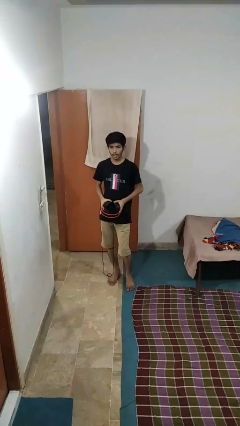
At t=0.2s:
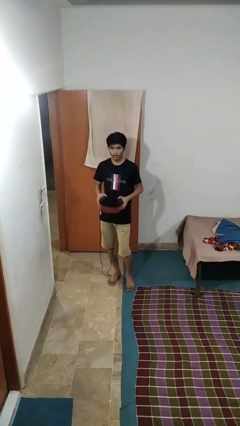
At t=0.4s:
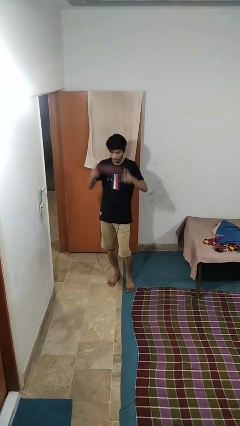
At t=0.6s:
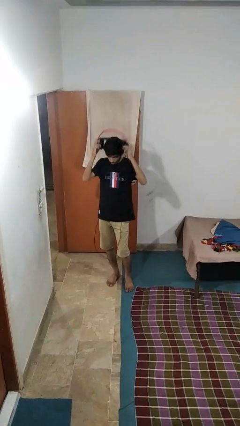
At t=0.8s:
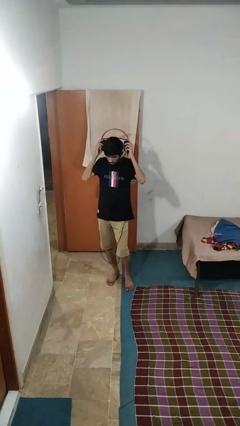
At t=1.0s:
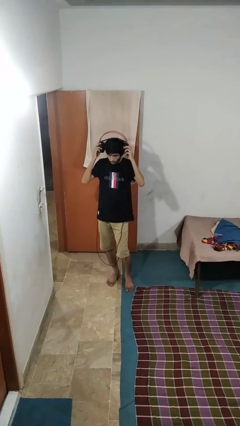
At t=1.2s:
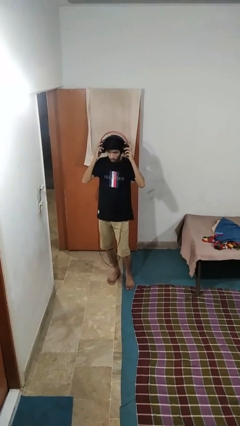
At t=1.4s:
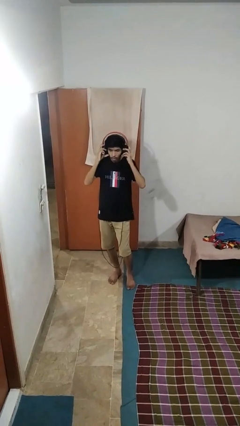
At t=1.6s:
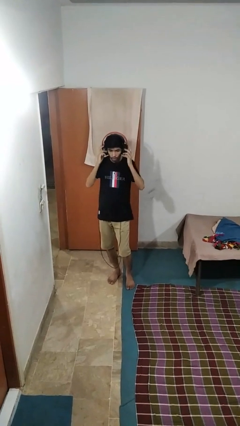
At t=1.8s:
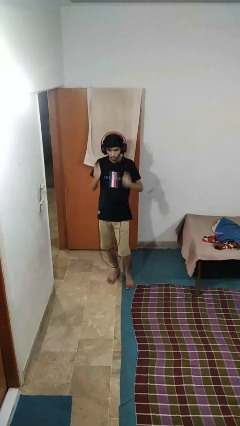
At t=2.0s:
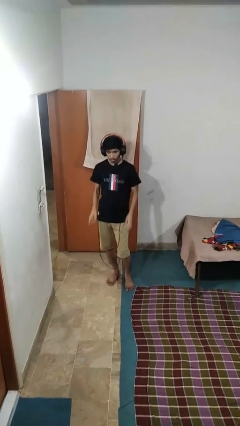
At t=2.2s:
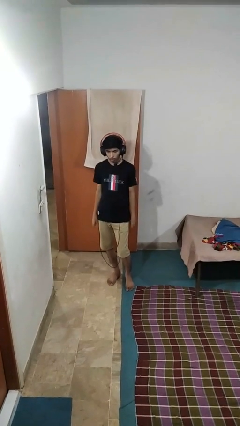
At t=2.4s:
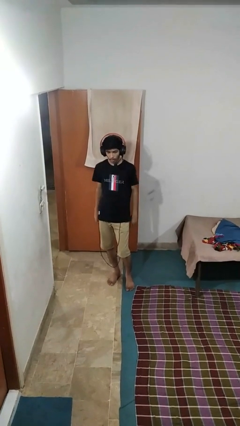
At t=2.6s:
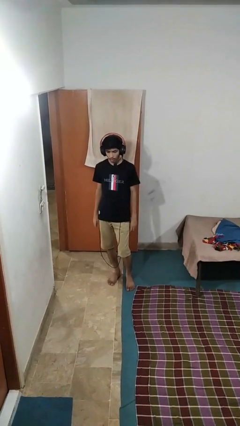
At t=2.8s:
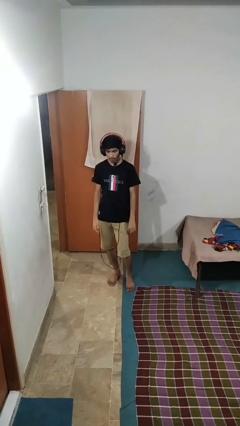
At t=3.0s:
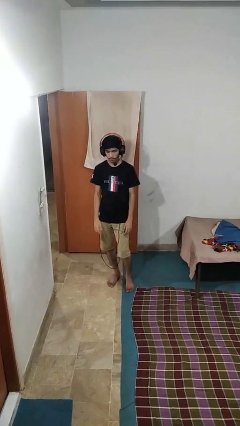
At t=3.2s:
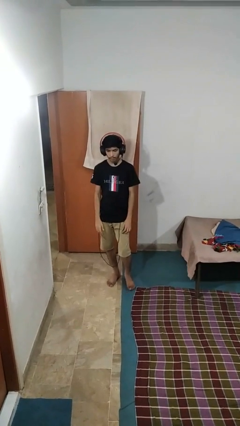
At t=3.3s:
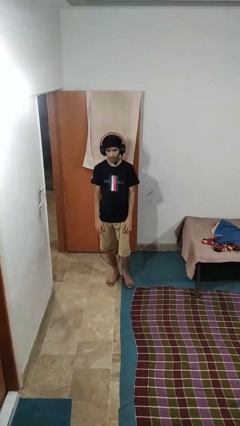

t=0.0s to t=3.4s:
person puts on headphones

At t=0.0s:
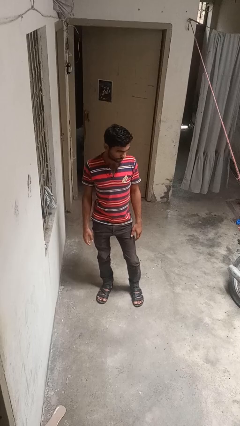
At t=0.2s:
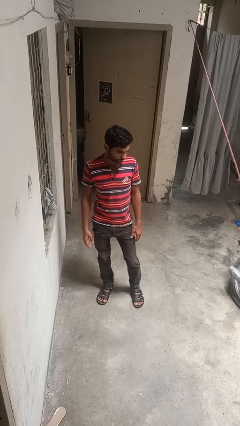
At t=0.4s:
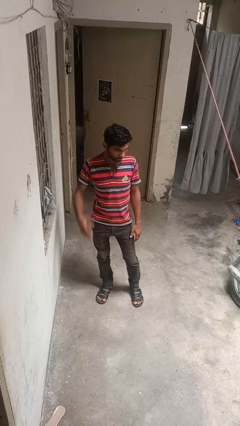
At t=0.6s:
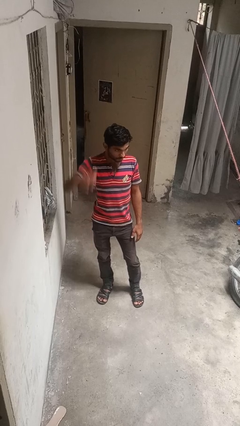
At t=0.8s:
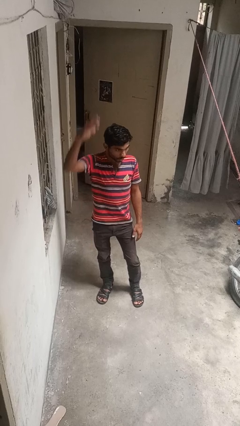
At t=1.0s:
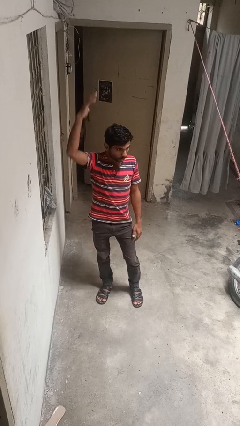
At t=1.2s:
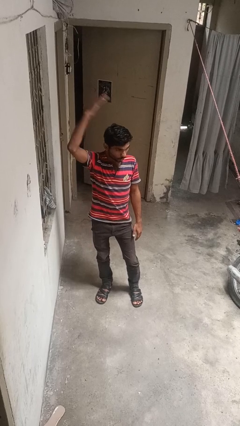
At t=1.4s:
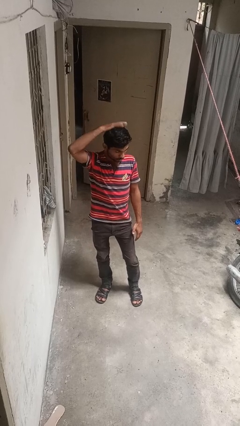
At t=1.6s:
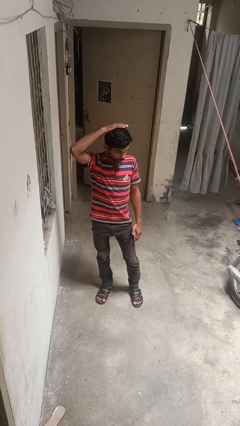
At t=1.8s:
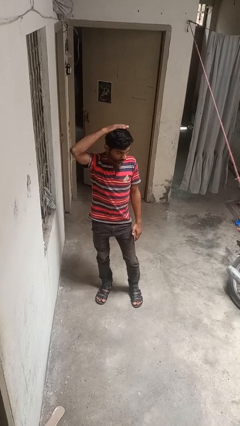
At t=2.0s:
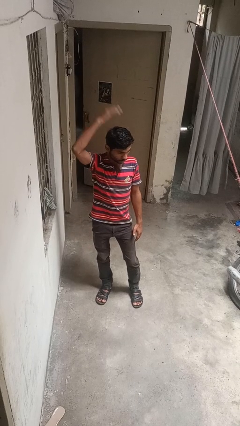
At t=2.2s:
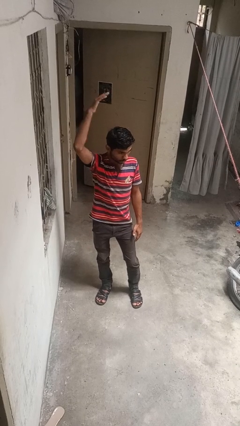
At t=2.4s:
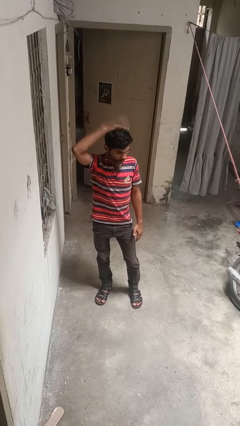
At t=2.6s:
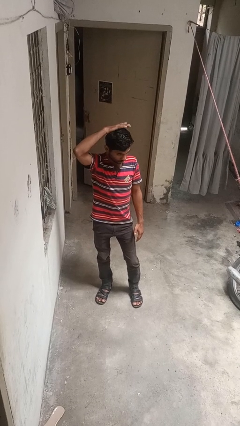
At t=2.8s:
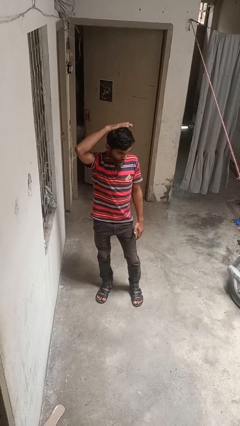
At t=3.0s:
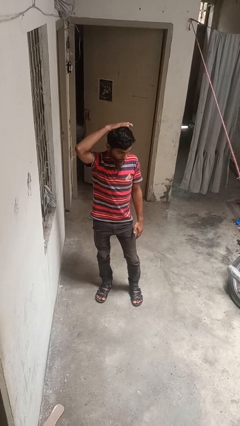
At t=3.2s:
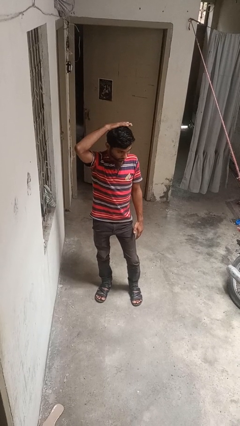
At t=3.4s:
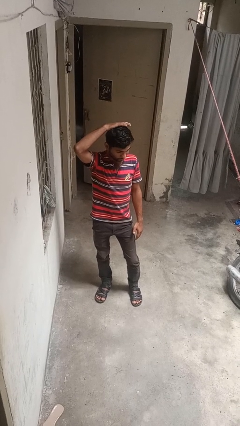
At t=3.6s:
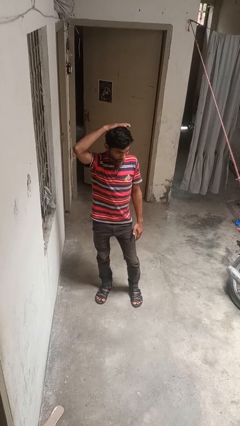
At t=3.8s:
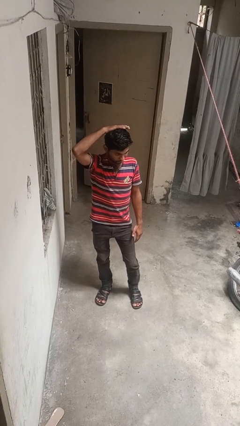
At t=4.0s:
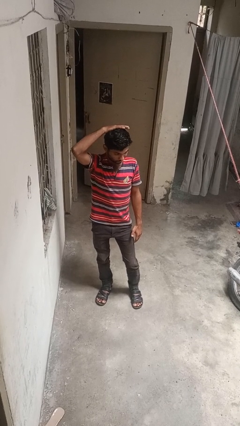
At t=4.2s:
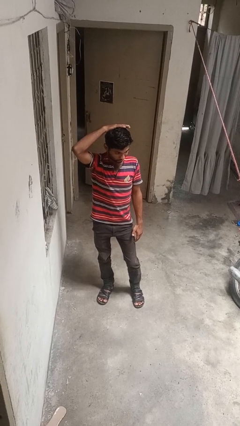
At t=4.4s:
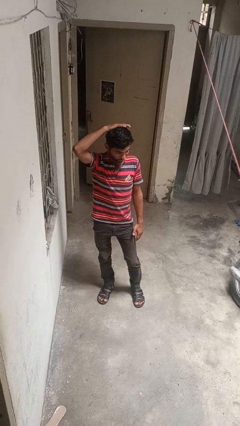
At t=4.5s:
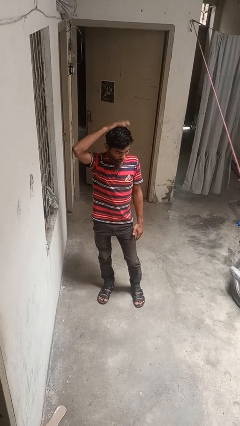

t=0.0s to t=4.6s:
person pats head

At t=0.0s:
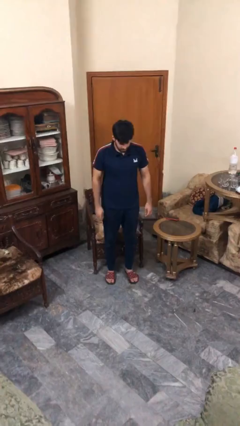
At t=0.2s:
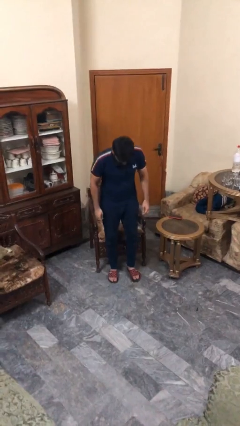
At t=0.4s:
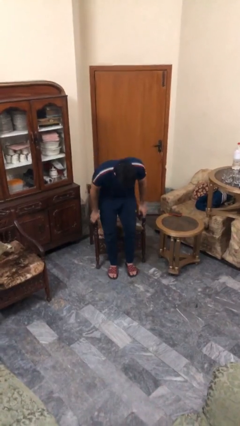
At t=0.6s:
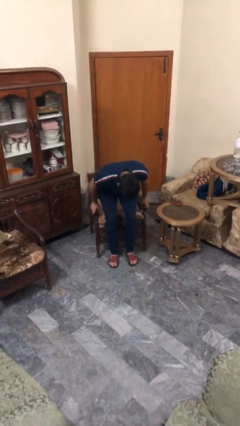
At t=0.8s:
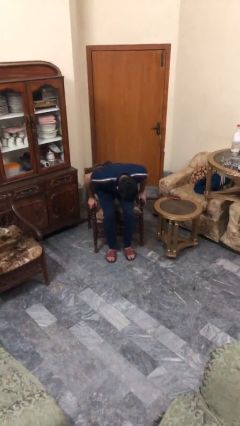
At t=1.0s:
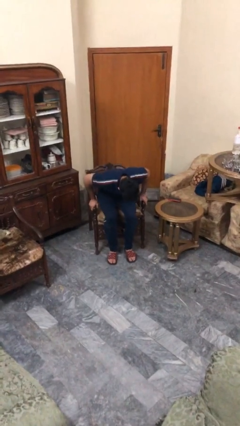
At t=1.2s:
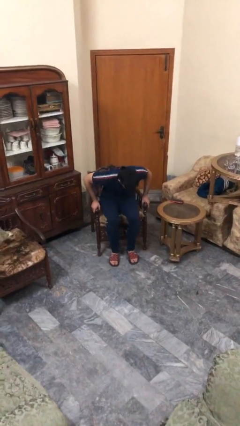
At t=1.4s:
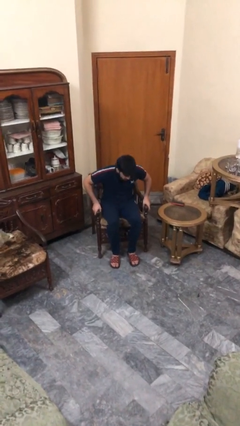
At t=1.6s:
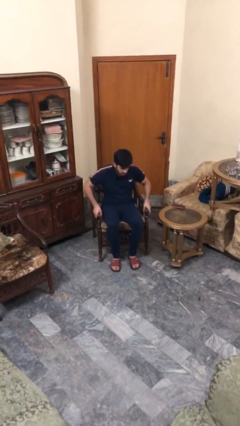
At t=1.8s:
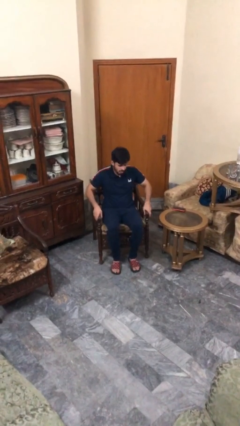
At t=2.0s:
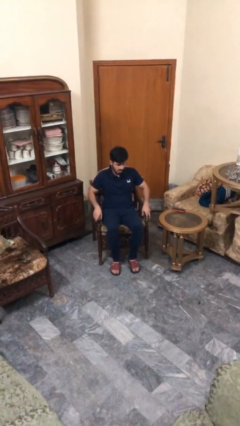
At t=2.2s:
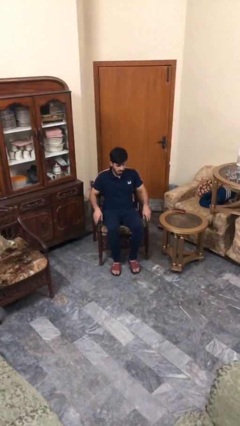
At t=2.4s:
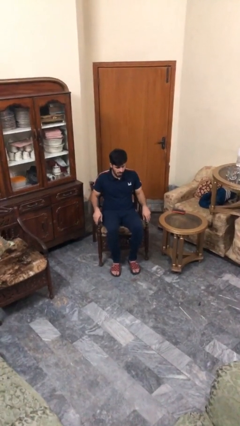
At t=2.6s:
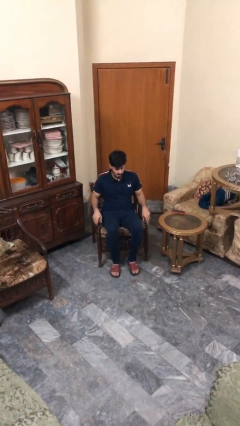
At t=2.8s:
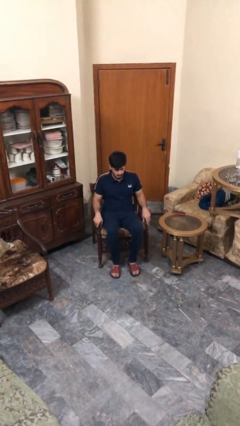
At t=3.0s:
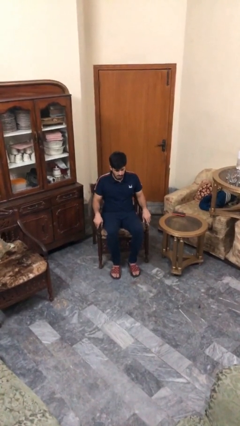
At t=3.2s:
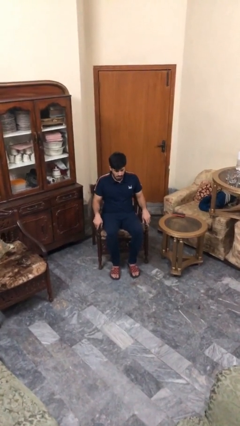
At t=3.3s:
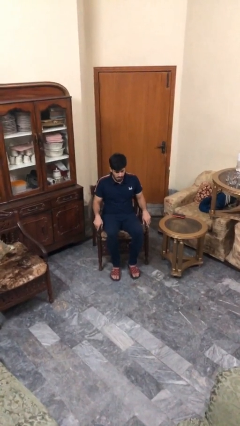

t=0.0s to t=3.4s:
person sits down

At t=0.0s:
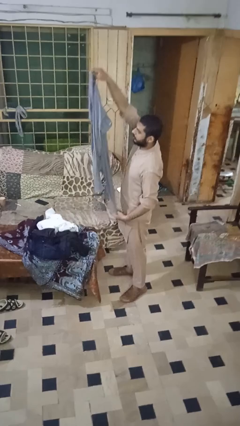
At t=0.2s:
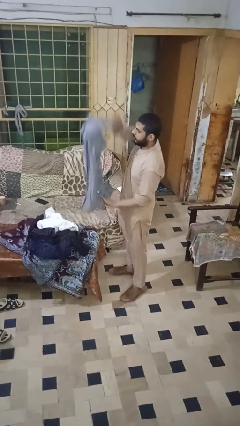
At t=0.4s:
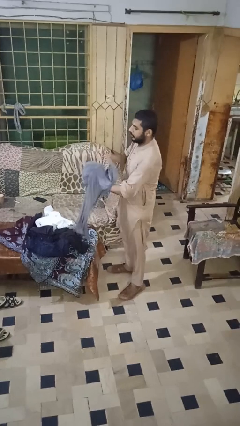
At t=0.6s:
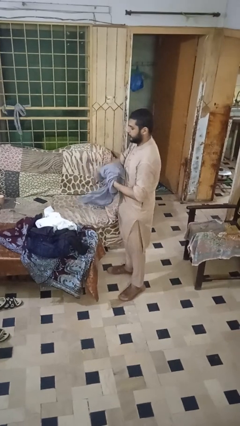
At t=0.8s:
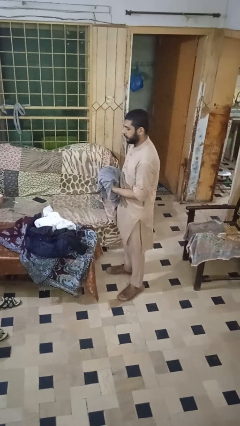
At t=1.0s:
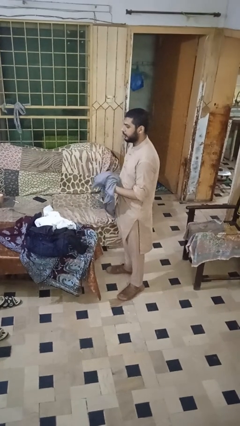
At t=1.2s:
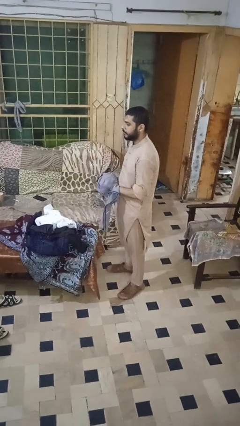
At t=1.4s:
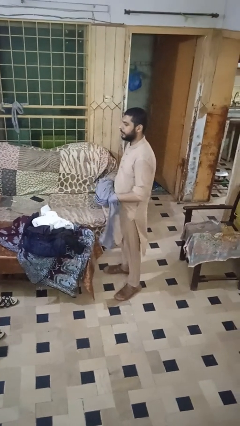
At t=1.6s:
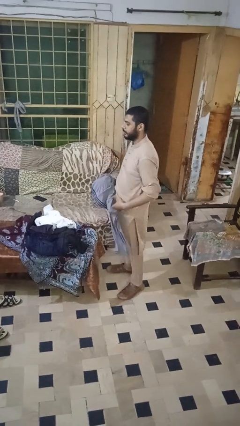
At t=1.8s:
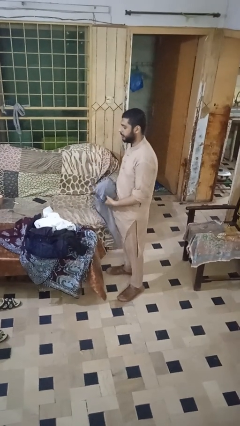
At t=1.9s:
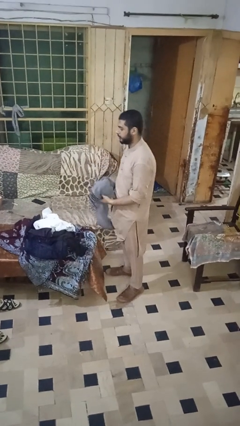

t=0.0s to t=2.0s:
person folds pants

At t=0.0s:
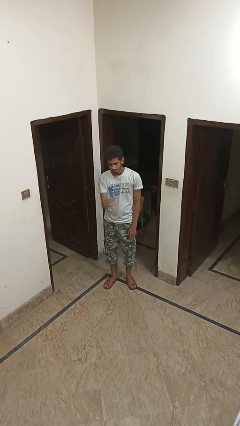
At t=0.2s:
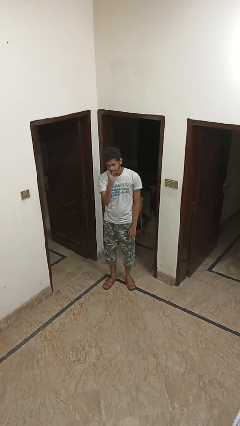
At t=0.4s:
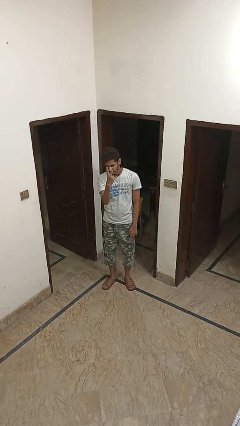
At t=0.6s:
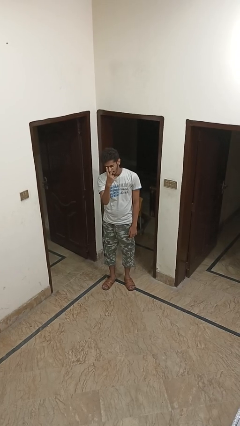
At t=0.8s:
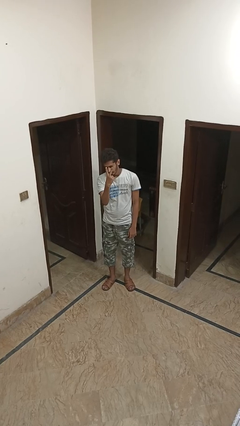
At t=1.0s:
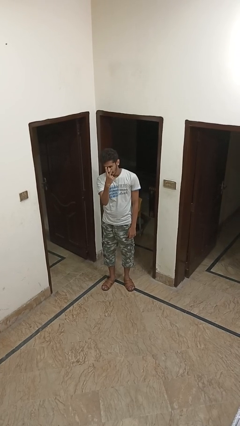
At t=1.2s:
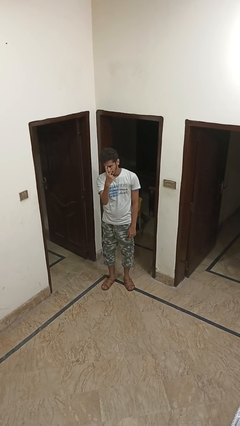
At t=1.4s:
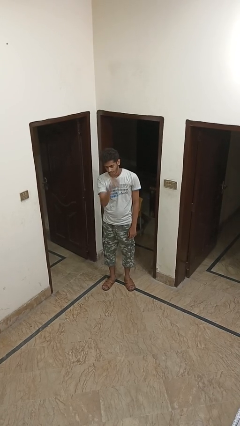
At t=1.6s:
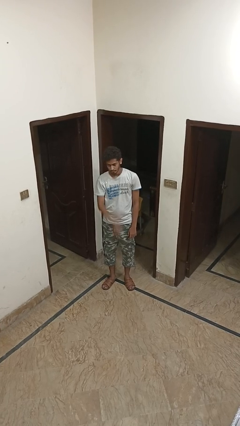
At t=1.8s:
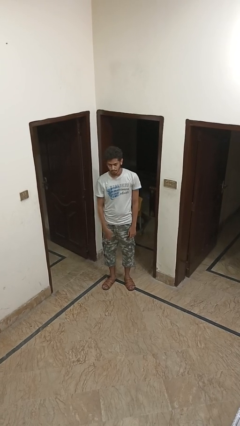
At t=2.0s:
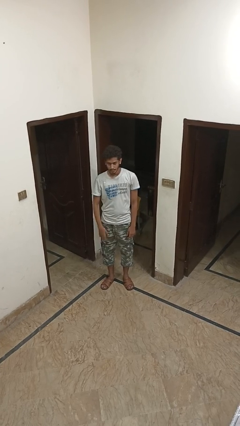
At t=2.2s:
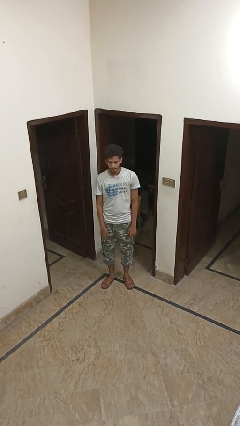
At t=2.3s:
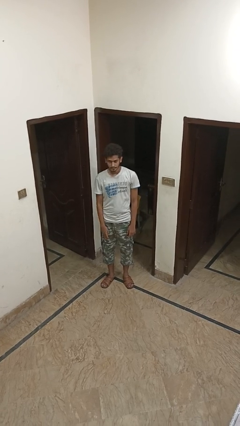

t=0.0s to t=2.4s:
person gestures peace

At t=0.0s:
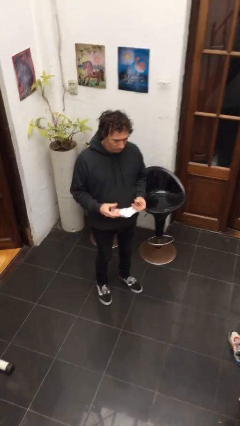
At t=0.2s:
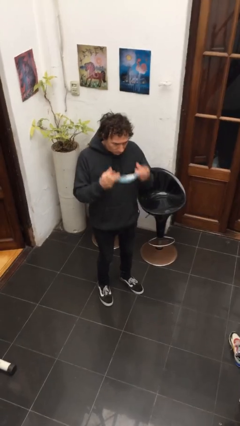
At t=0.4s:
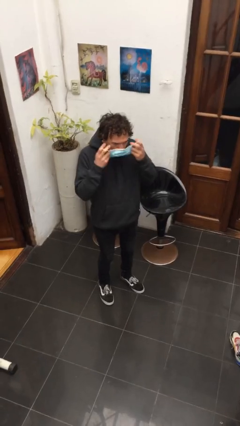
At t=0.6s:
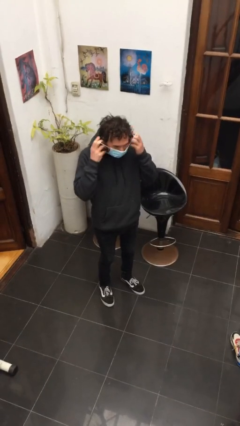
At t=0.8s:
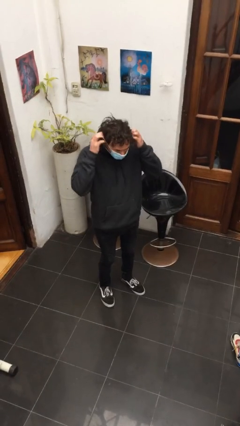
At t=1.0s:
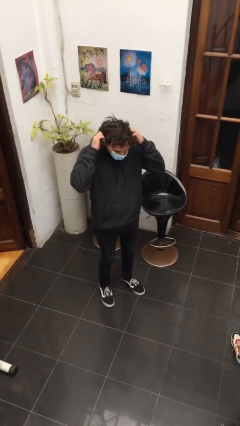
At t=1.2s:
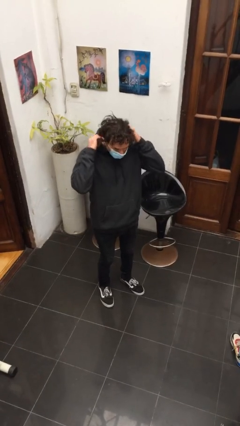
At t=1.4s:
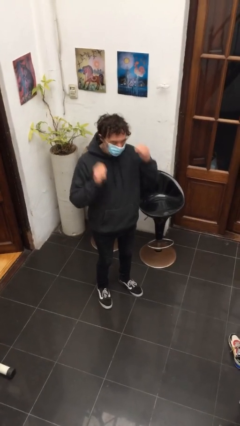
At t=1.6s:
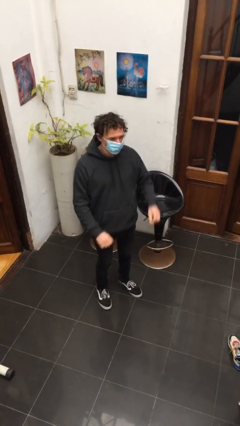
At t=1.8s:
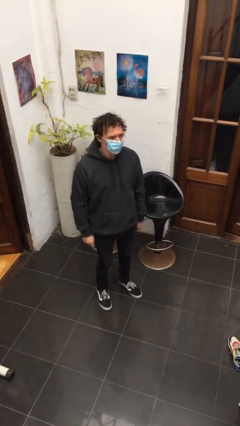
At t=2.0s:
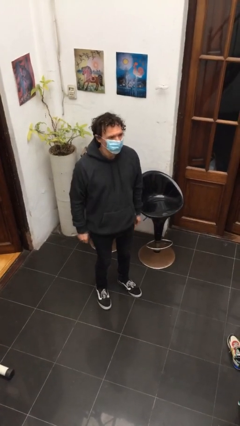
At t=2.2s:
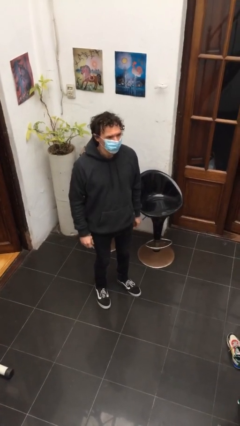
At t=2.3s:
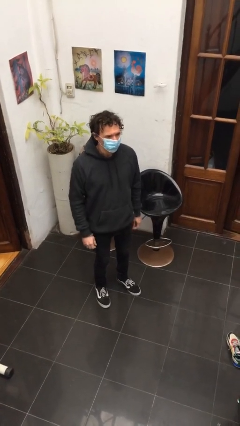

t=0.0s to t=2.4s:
person puts on facemask
